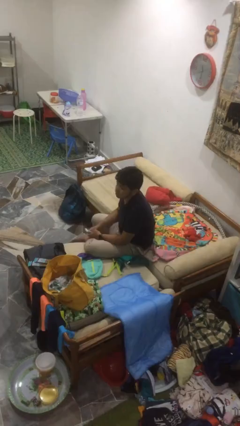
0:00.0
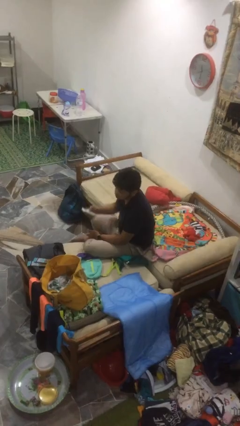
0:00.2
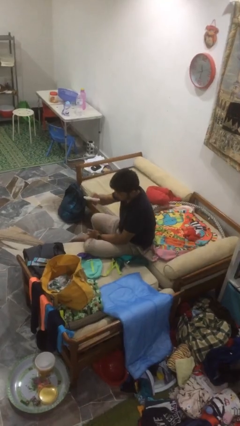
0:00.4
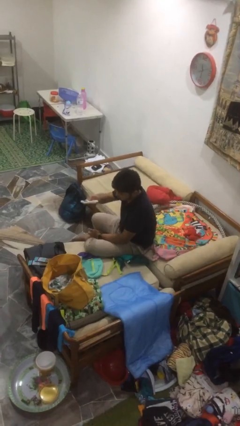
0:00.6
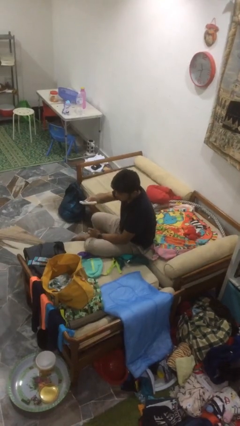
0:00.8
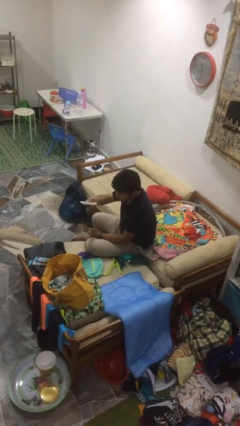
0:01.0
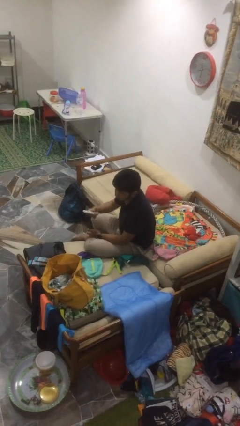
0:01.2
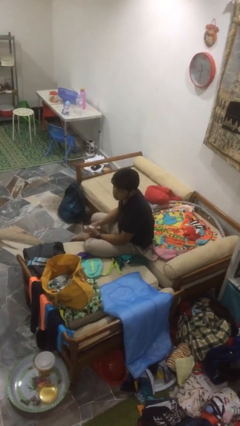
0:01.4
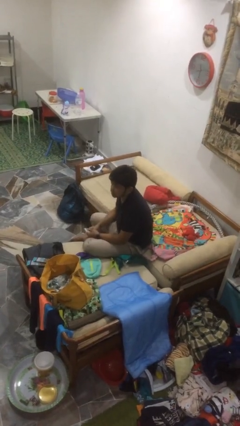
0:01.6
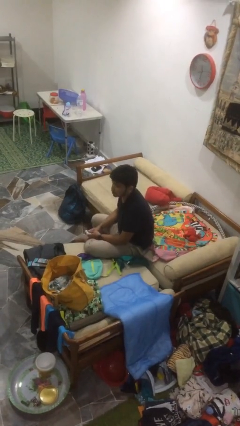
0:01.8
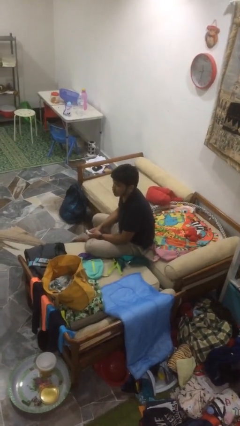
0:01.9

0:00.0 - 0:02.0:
person uses television remote

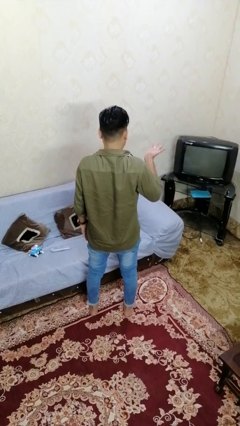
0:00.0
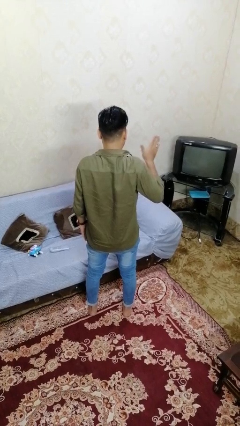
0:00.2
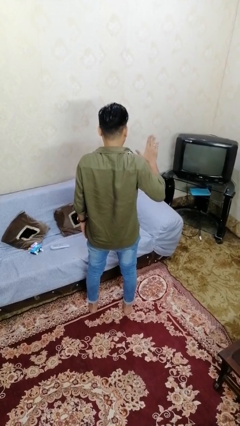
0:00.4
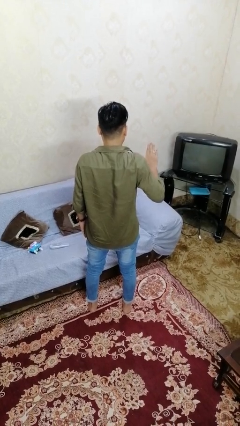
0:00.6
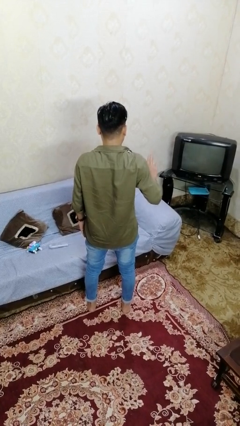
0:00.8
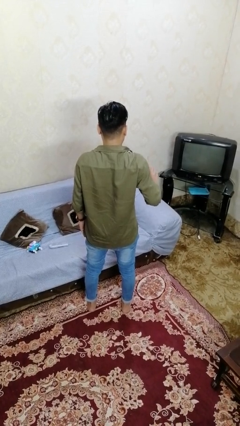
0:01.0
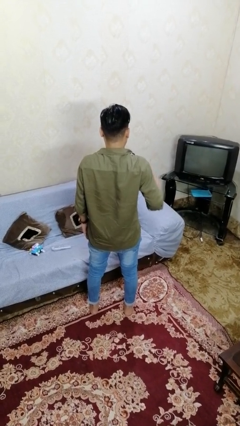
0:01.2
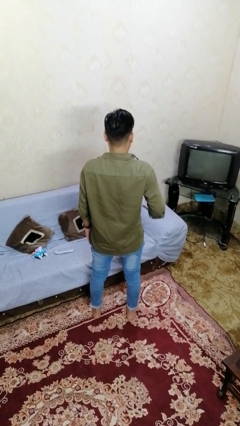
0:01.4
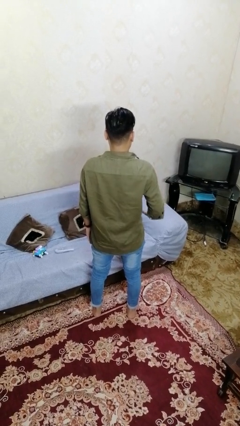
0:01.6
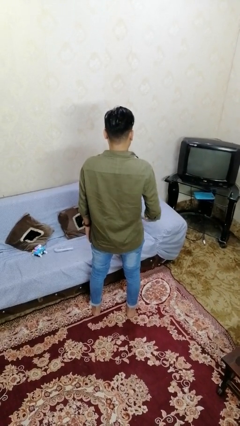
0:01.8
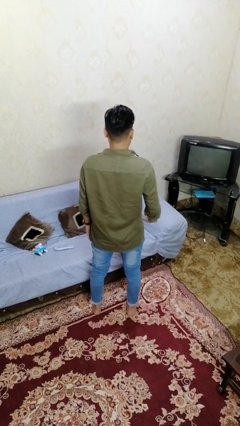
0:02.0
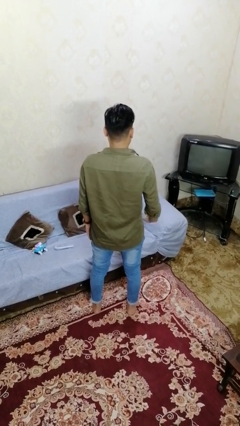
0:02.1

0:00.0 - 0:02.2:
person gestures swipe down

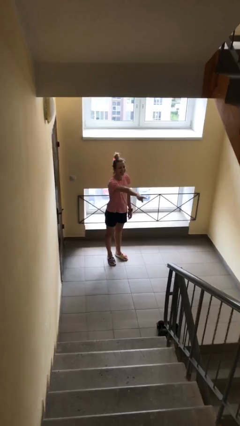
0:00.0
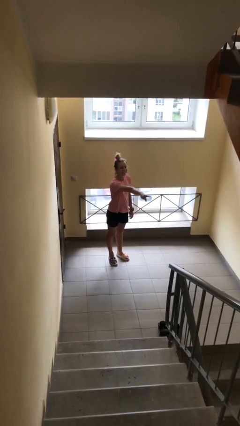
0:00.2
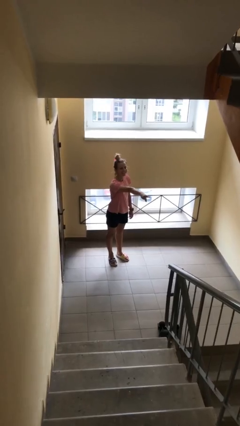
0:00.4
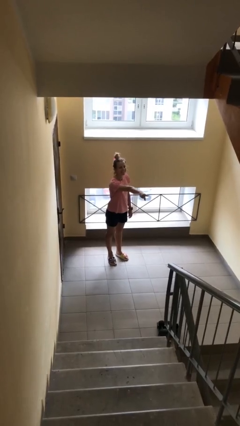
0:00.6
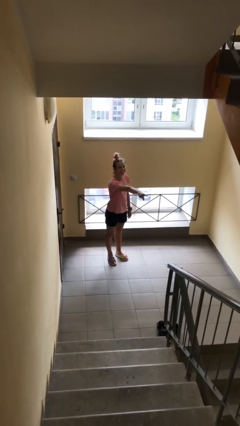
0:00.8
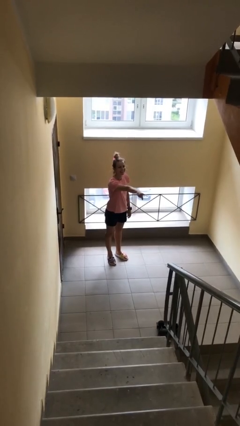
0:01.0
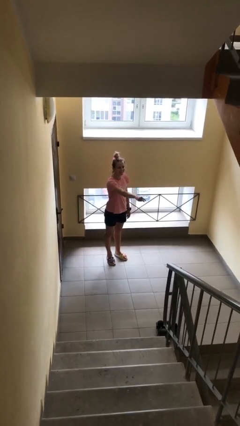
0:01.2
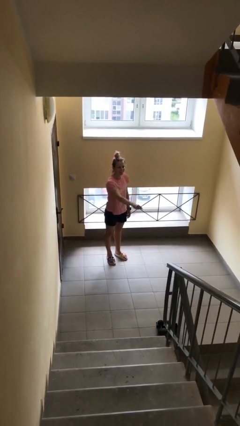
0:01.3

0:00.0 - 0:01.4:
person points at person

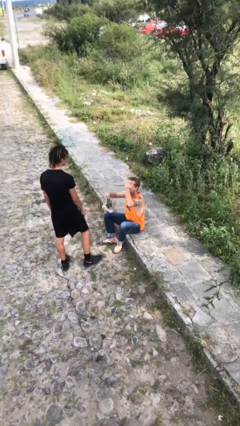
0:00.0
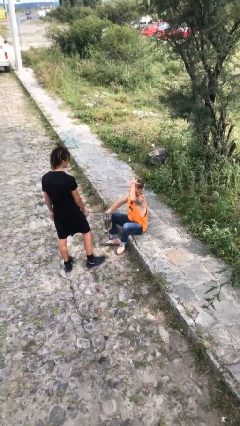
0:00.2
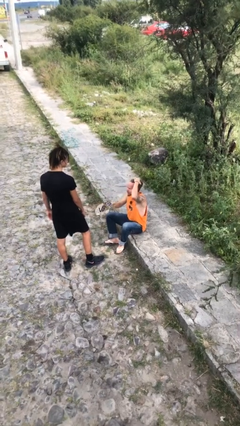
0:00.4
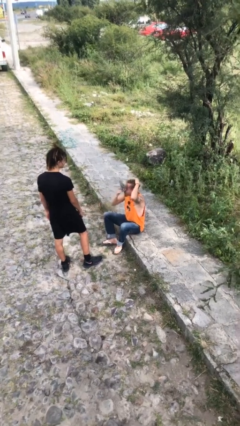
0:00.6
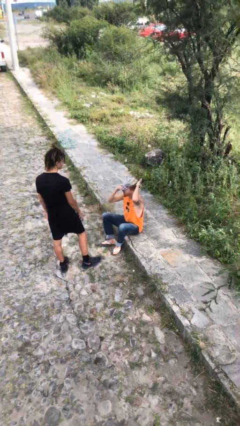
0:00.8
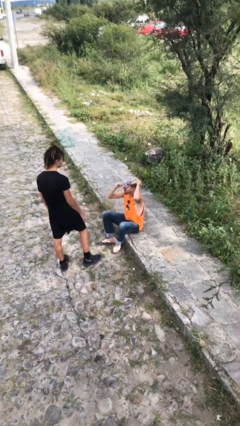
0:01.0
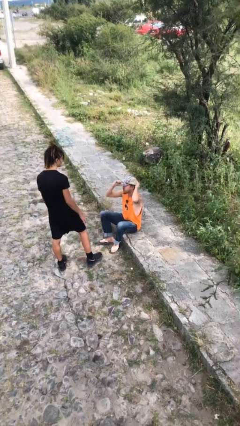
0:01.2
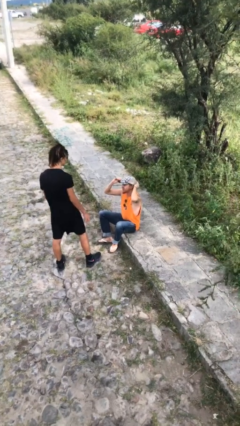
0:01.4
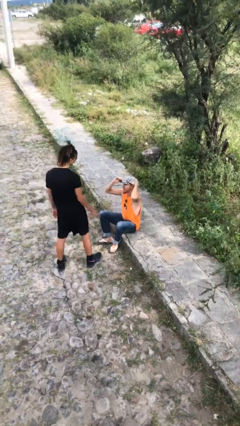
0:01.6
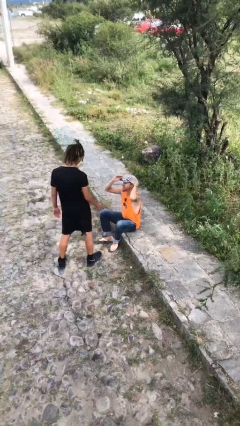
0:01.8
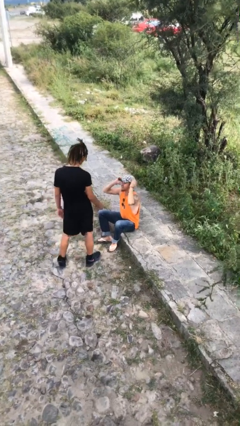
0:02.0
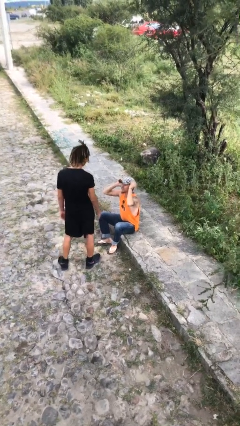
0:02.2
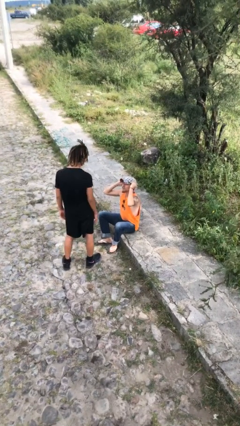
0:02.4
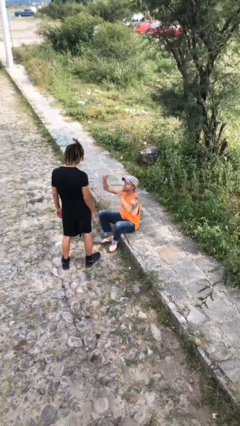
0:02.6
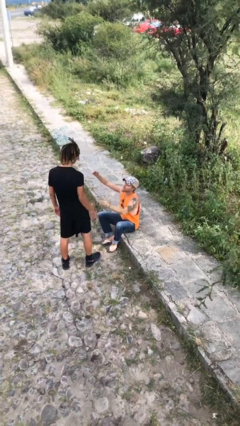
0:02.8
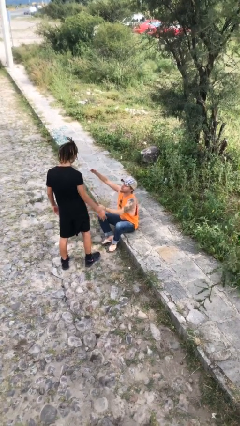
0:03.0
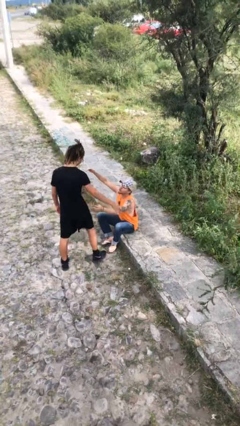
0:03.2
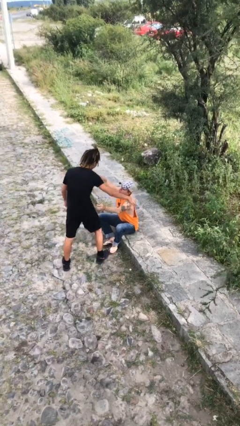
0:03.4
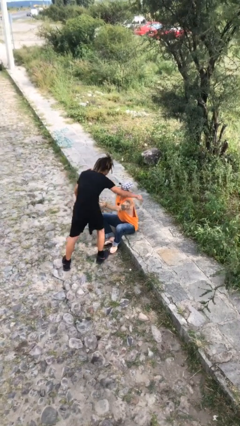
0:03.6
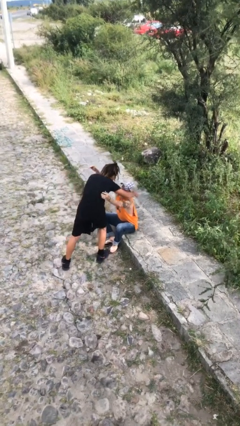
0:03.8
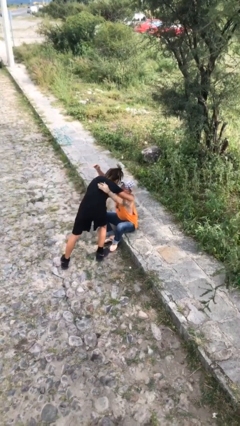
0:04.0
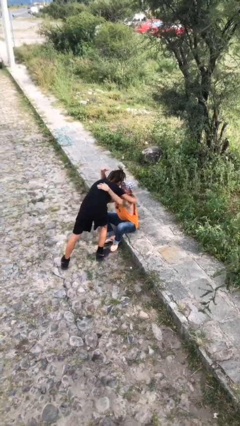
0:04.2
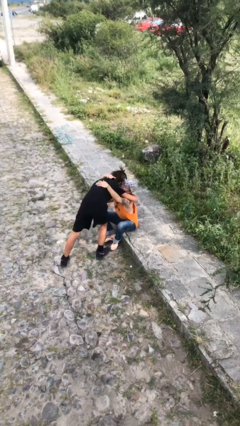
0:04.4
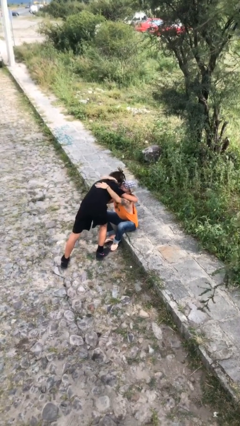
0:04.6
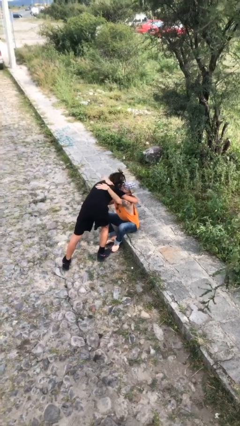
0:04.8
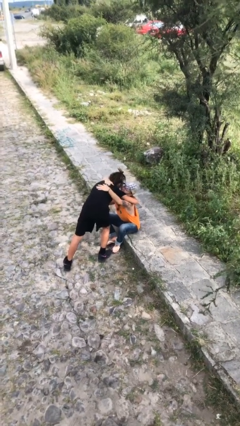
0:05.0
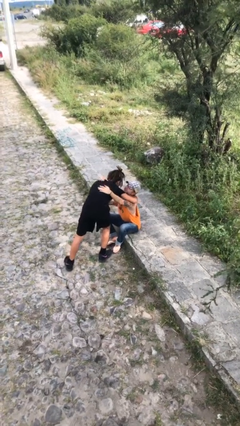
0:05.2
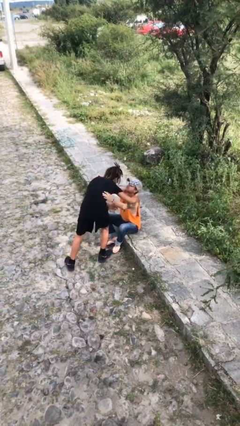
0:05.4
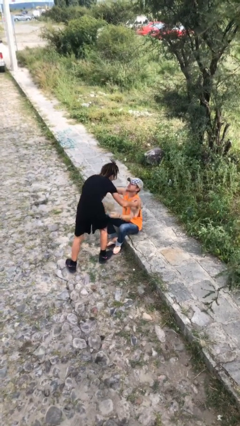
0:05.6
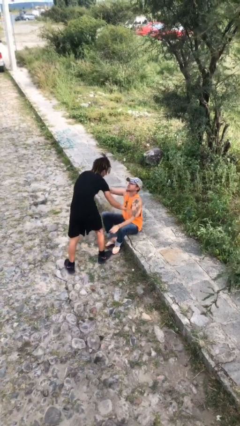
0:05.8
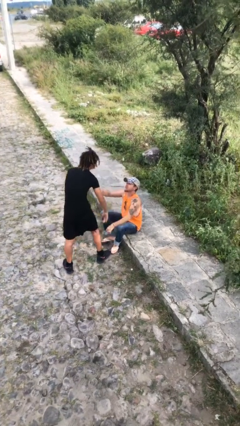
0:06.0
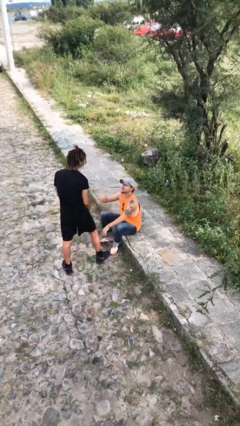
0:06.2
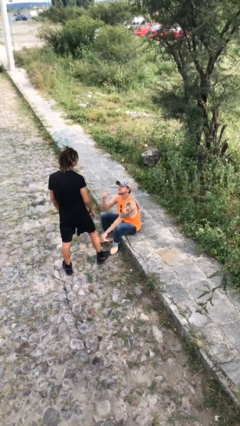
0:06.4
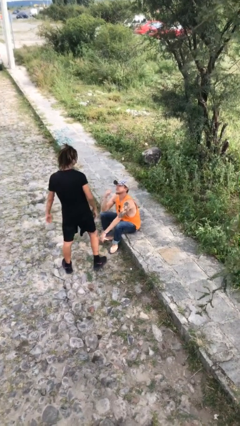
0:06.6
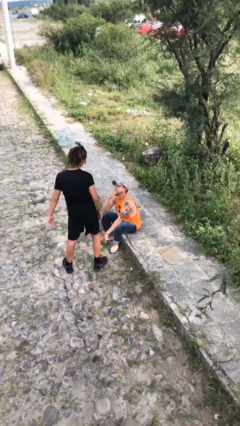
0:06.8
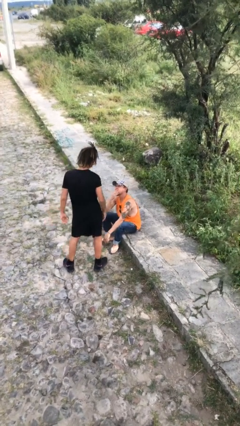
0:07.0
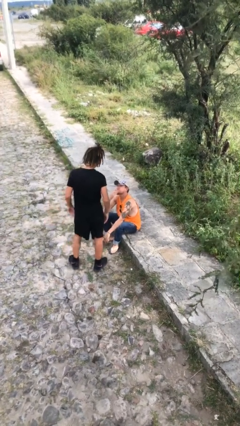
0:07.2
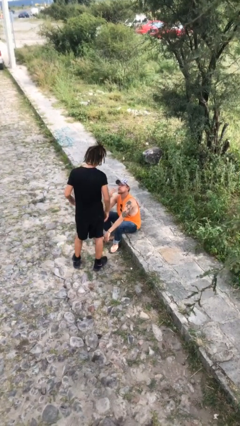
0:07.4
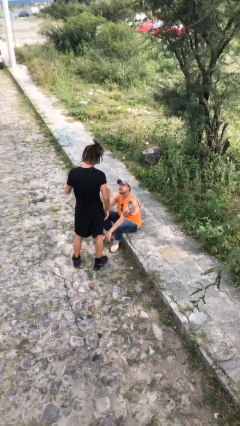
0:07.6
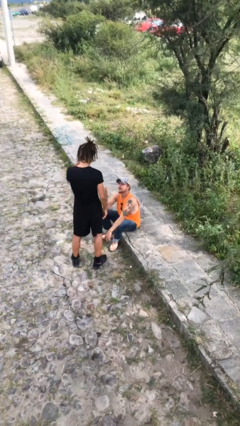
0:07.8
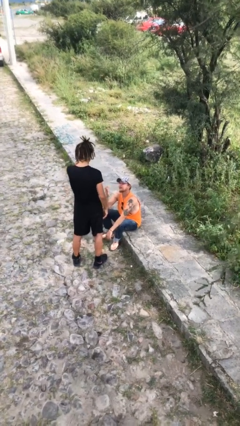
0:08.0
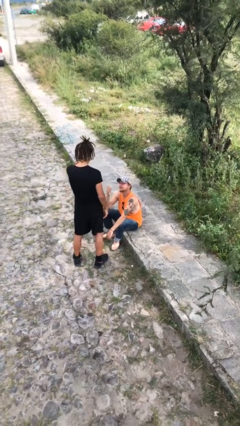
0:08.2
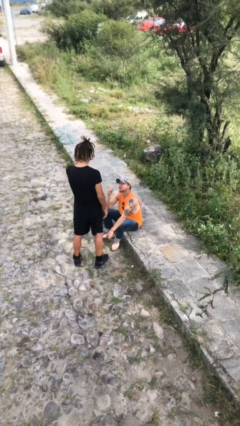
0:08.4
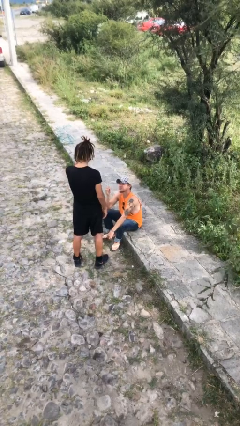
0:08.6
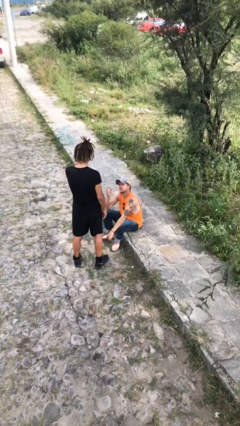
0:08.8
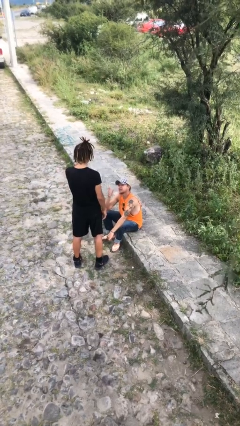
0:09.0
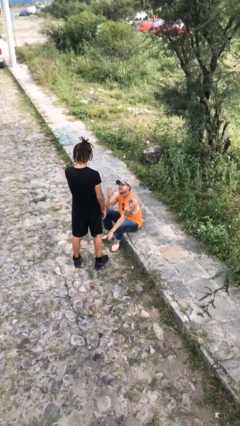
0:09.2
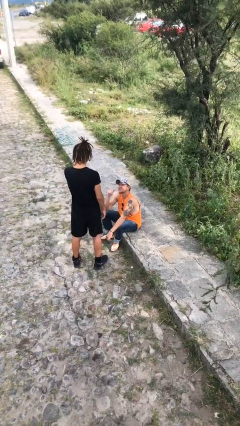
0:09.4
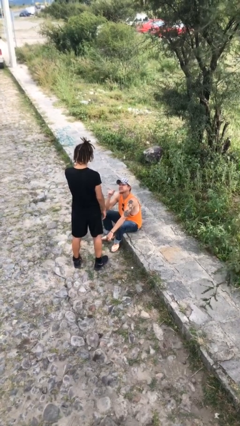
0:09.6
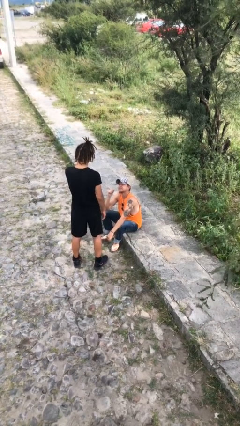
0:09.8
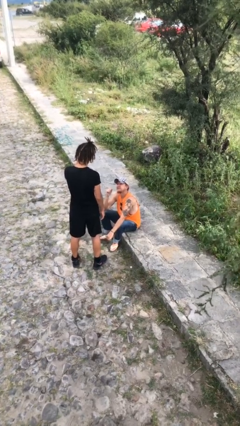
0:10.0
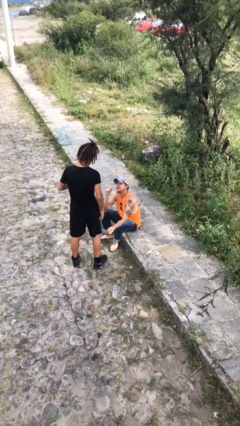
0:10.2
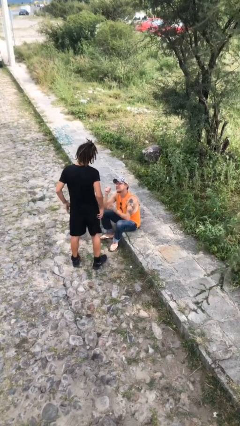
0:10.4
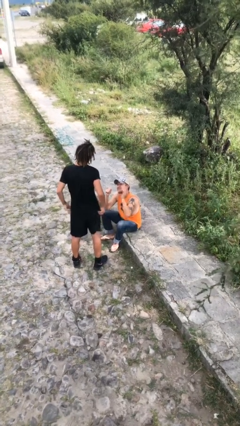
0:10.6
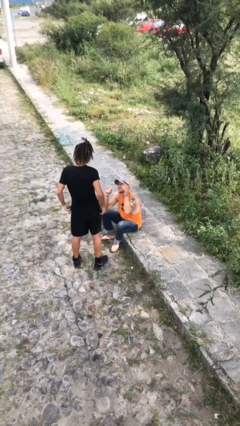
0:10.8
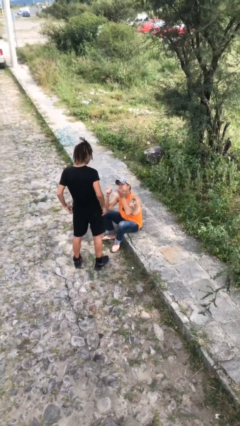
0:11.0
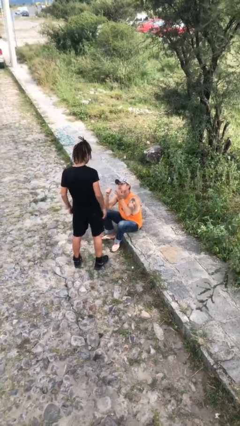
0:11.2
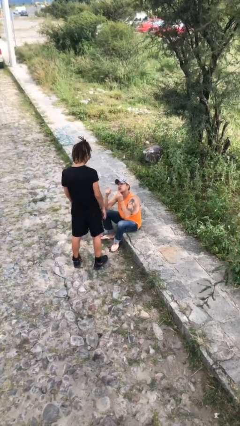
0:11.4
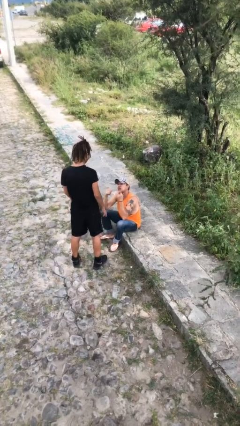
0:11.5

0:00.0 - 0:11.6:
person embraces person

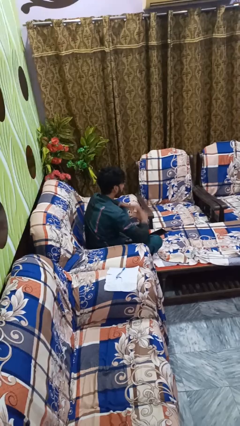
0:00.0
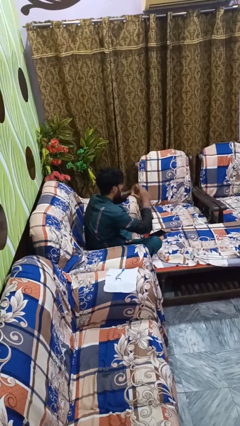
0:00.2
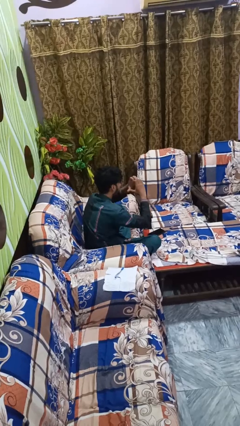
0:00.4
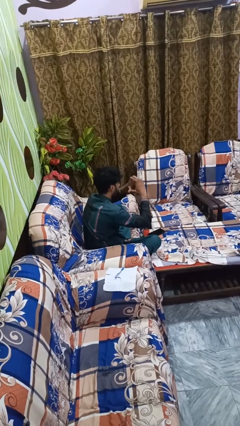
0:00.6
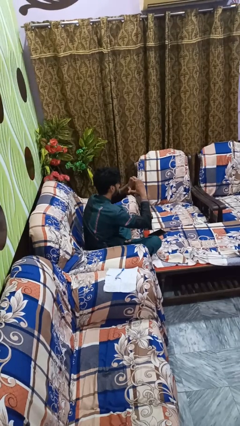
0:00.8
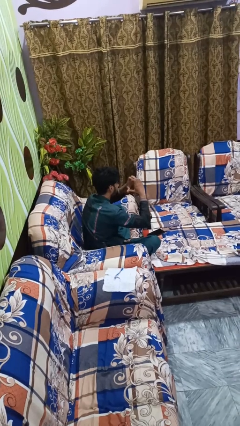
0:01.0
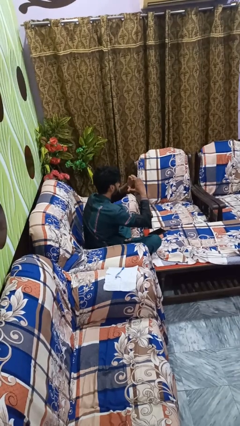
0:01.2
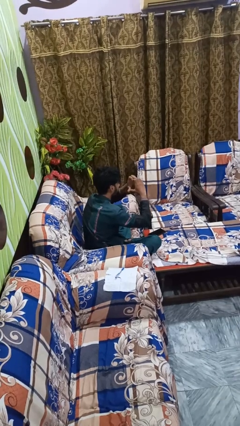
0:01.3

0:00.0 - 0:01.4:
person gestures heart
